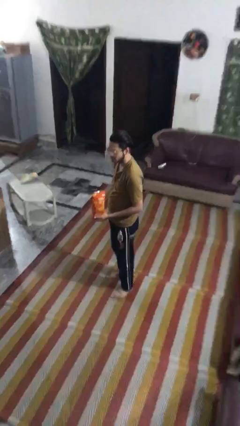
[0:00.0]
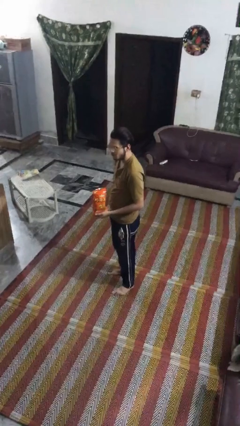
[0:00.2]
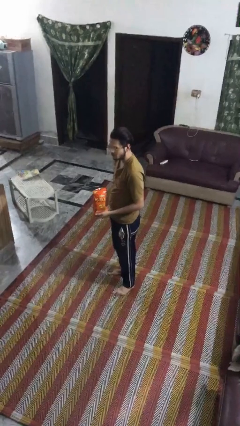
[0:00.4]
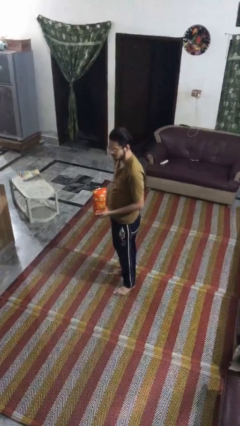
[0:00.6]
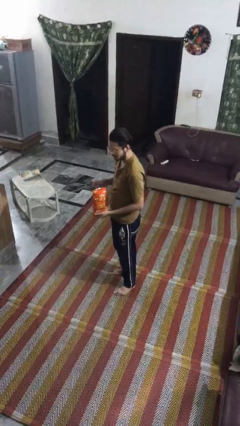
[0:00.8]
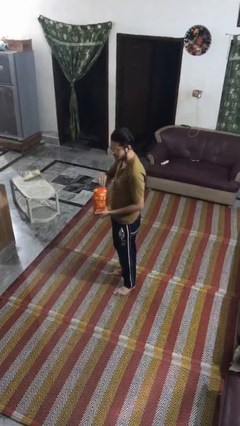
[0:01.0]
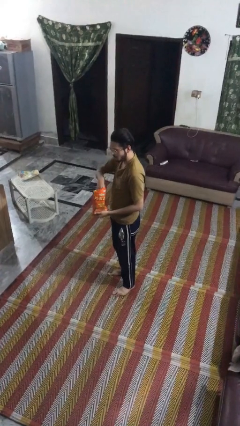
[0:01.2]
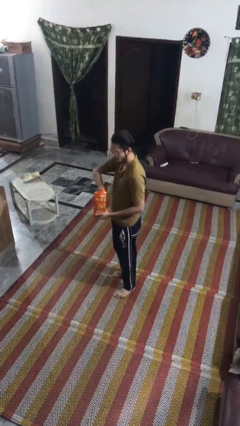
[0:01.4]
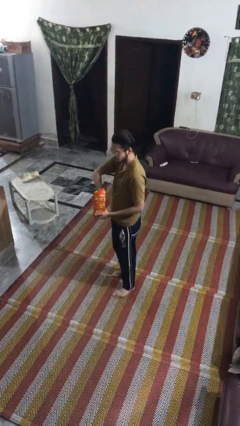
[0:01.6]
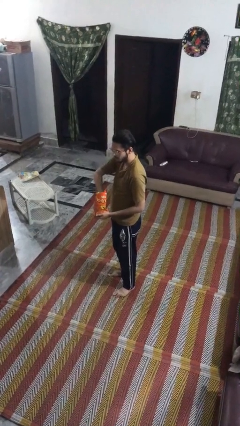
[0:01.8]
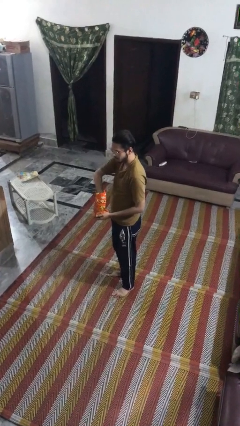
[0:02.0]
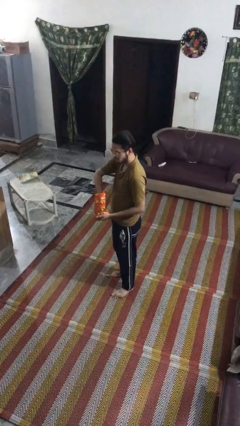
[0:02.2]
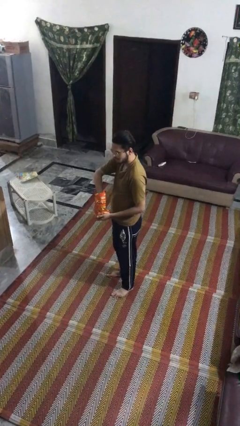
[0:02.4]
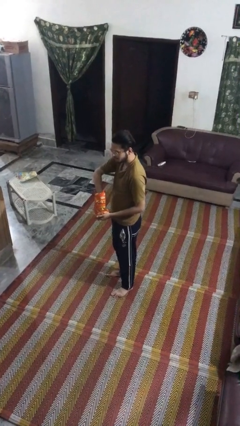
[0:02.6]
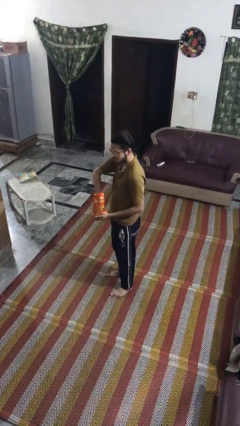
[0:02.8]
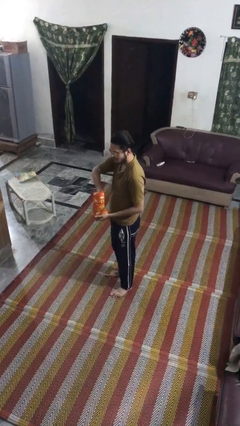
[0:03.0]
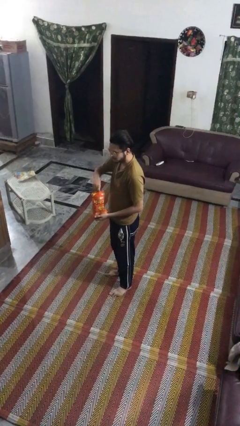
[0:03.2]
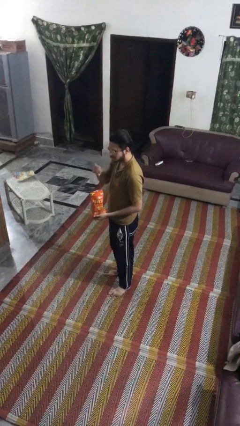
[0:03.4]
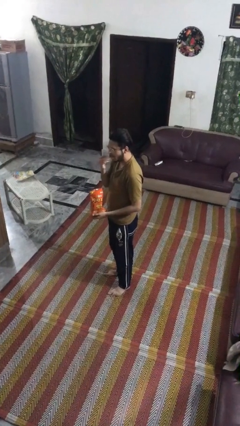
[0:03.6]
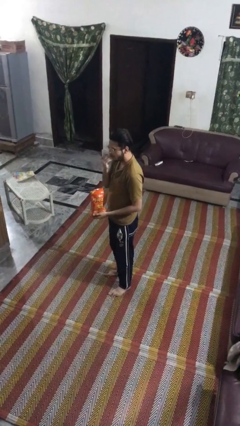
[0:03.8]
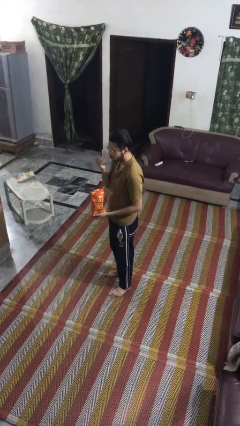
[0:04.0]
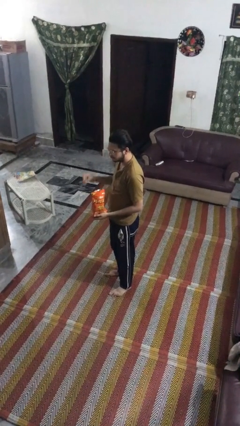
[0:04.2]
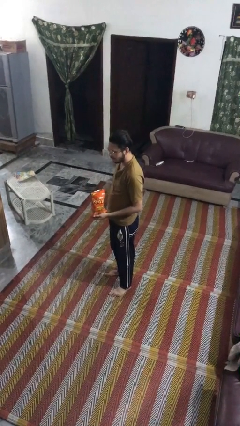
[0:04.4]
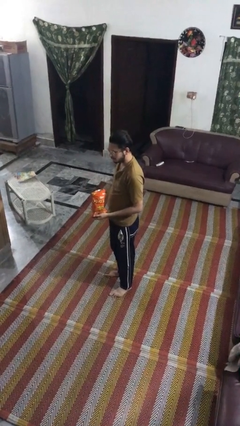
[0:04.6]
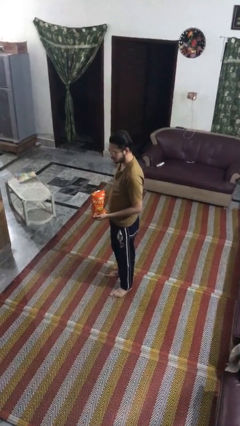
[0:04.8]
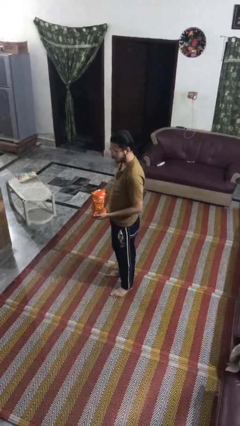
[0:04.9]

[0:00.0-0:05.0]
person eats snack from bag

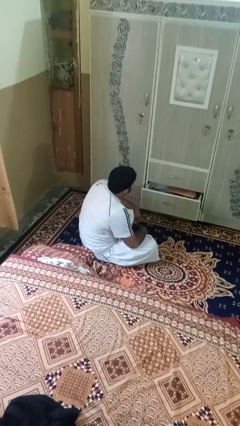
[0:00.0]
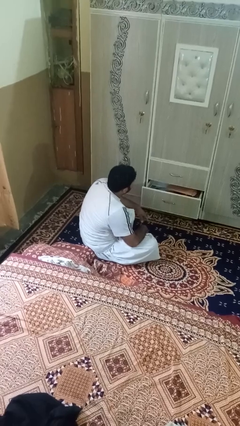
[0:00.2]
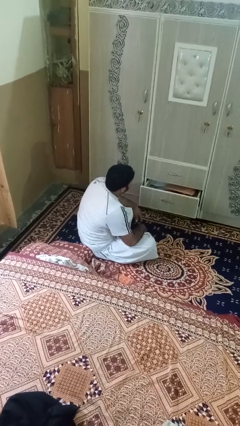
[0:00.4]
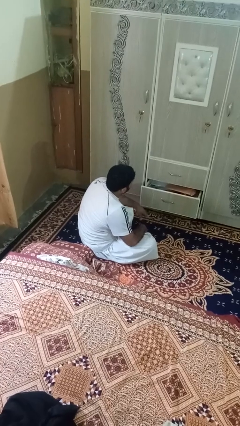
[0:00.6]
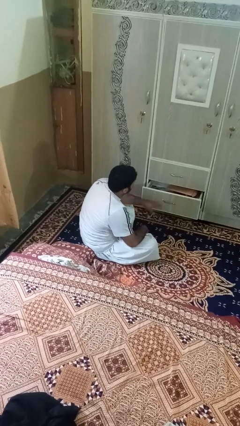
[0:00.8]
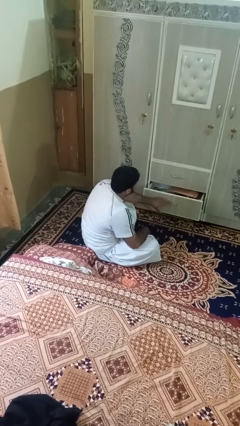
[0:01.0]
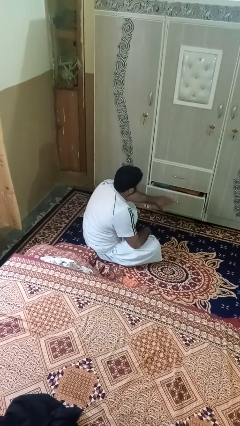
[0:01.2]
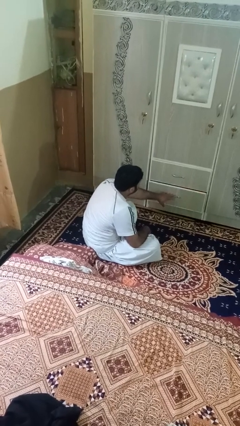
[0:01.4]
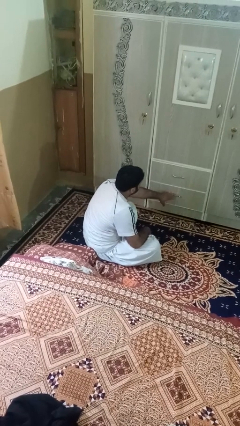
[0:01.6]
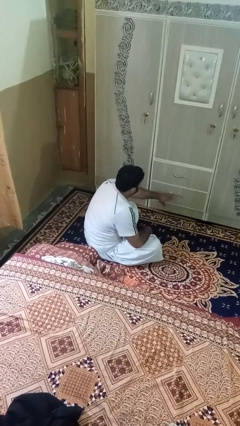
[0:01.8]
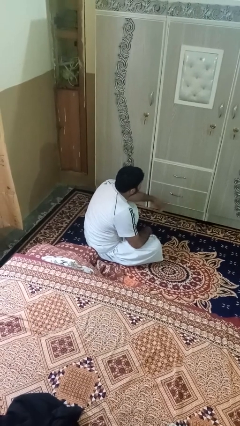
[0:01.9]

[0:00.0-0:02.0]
person closes dresser drawer

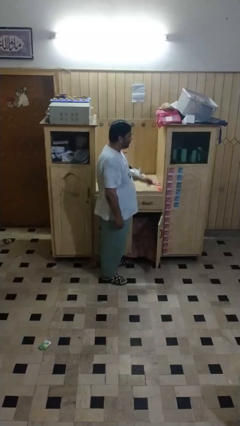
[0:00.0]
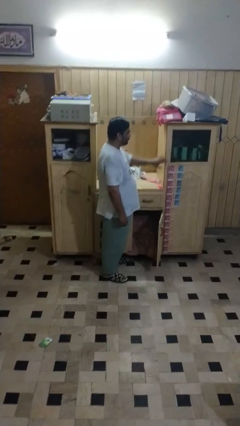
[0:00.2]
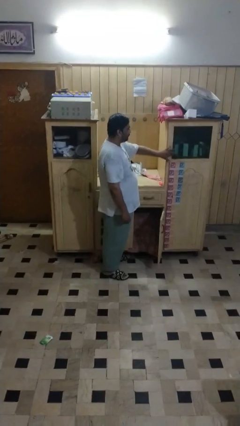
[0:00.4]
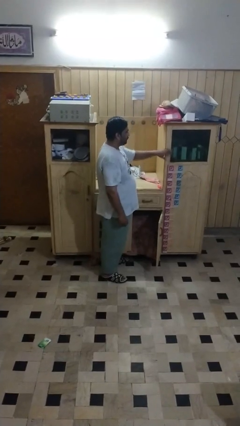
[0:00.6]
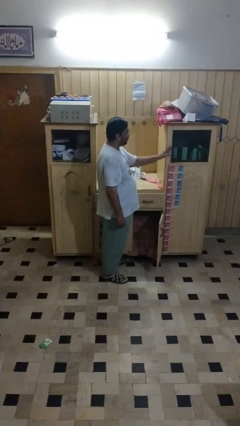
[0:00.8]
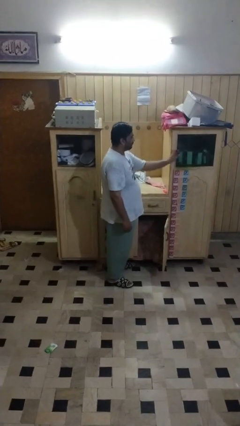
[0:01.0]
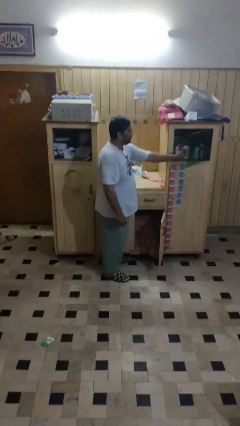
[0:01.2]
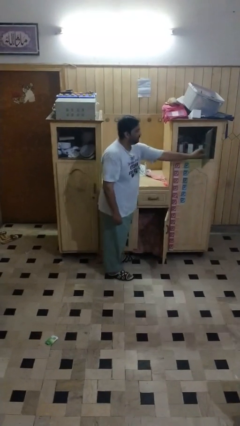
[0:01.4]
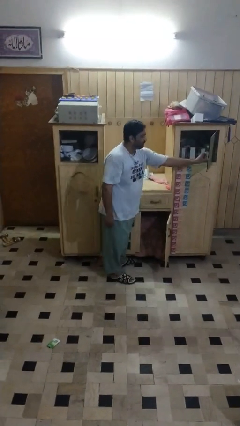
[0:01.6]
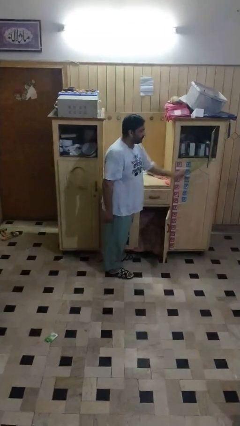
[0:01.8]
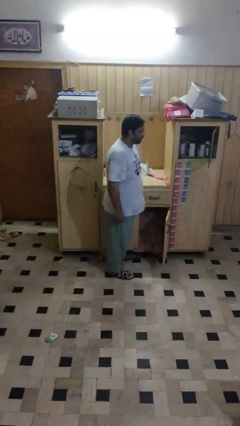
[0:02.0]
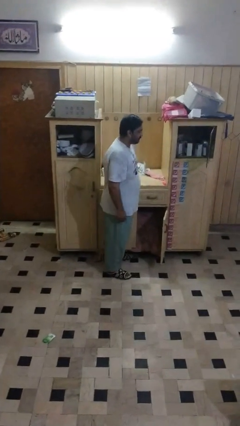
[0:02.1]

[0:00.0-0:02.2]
person closes cabinet

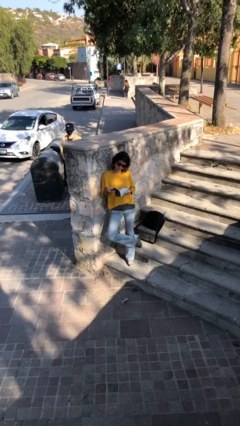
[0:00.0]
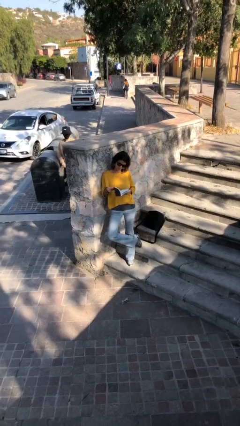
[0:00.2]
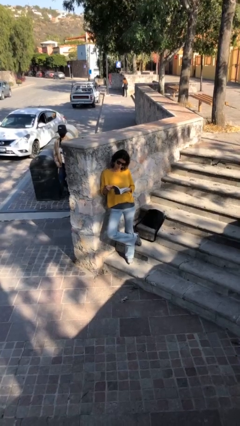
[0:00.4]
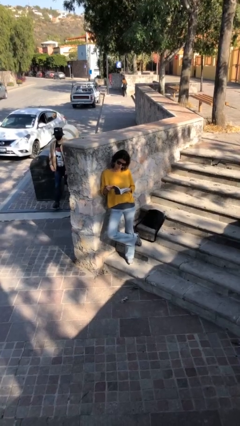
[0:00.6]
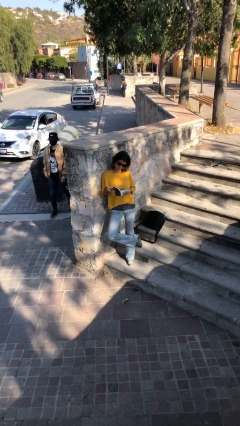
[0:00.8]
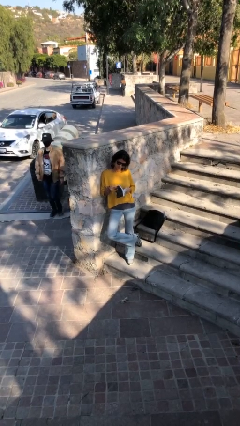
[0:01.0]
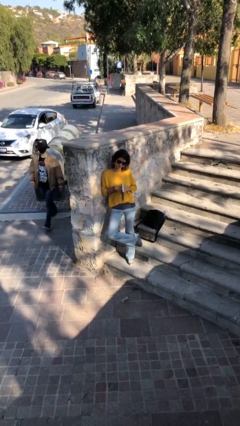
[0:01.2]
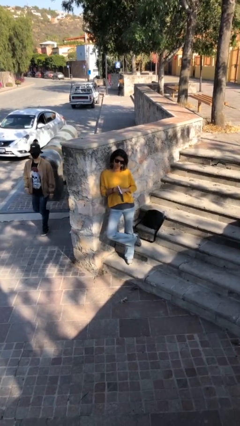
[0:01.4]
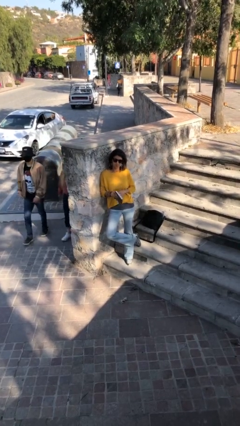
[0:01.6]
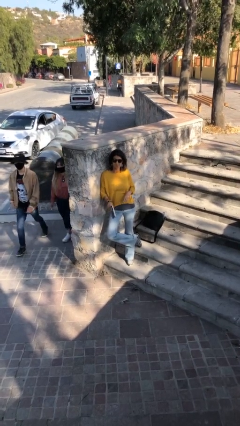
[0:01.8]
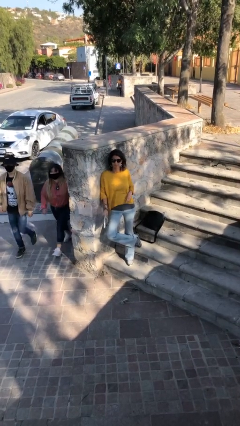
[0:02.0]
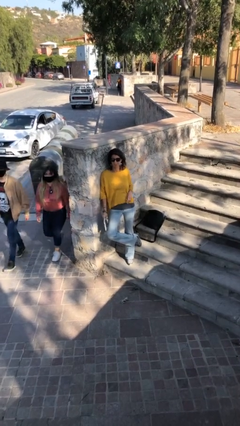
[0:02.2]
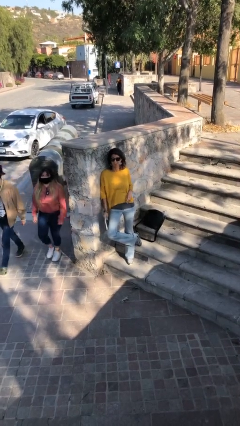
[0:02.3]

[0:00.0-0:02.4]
person reads document

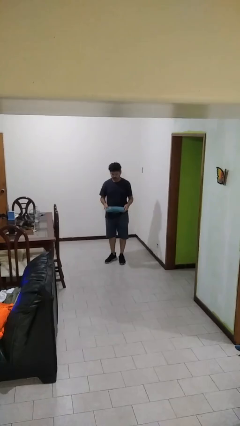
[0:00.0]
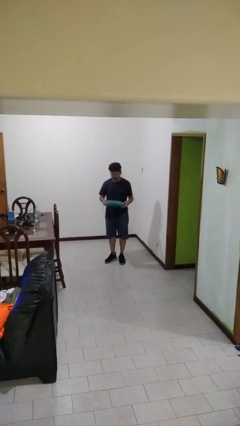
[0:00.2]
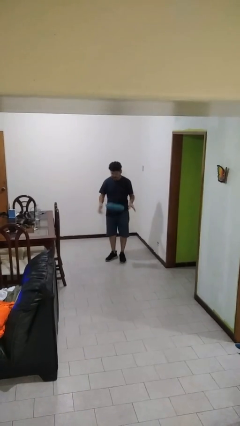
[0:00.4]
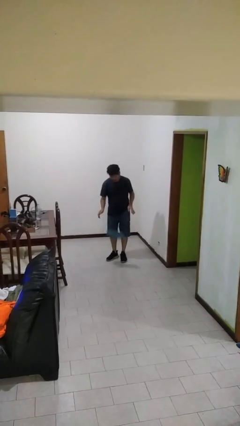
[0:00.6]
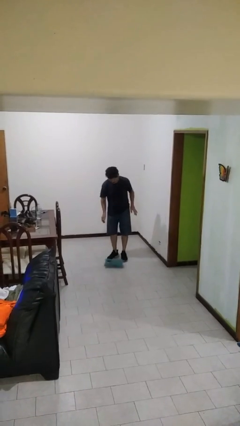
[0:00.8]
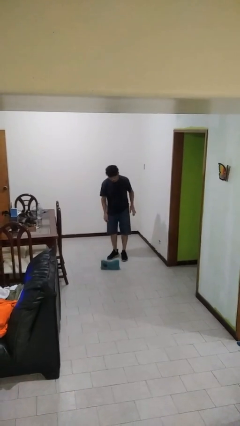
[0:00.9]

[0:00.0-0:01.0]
person drops object

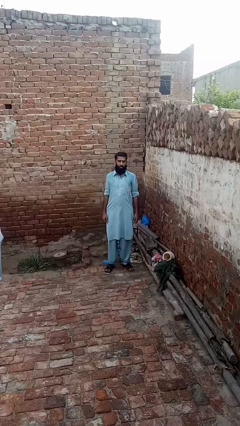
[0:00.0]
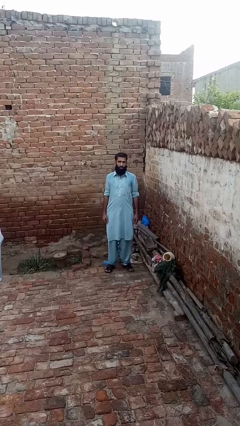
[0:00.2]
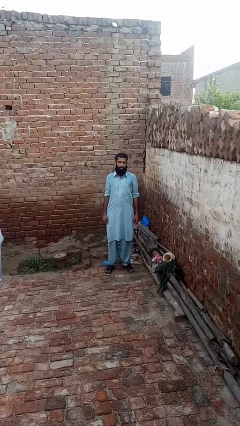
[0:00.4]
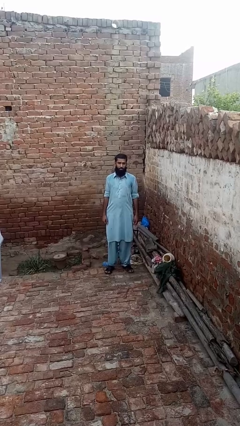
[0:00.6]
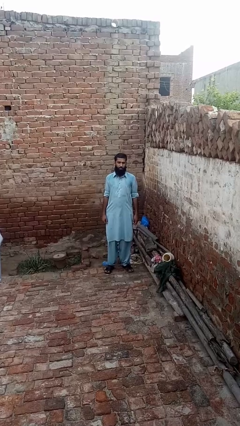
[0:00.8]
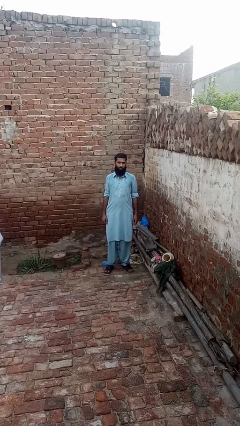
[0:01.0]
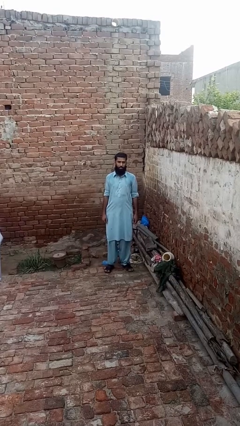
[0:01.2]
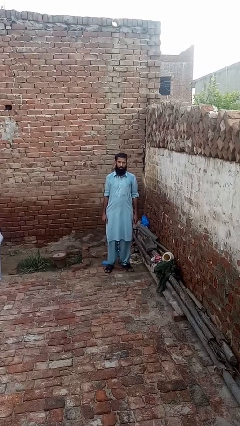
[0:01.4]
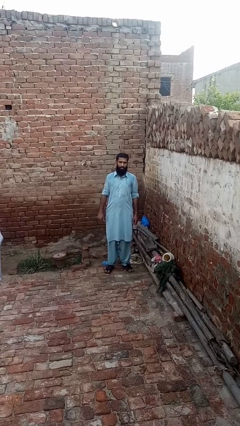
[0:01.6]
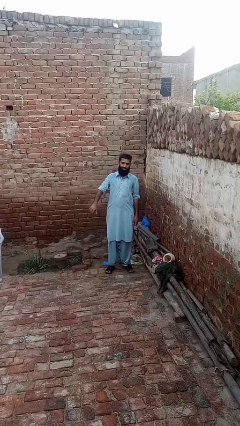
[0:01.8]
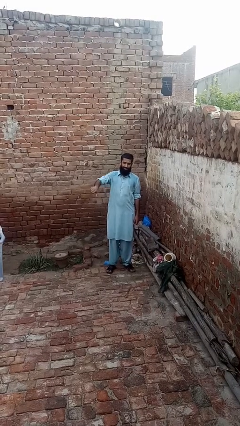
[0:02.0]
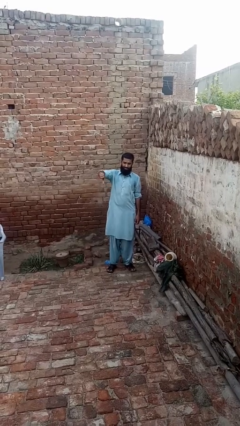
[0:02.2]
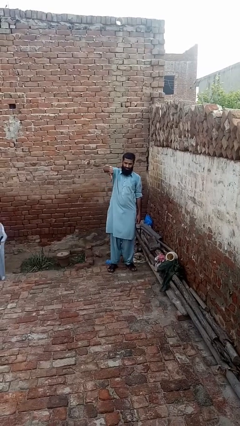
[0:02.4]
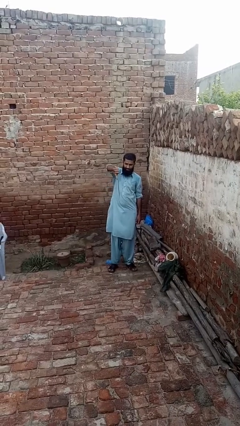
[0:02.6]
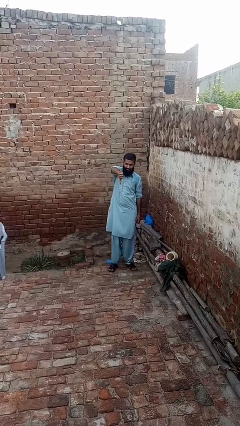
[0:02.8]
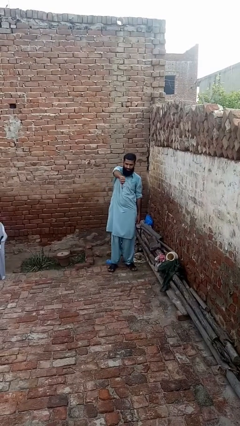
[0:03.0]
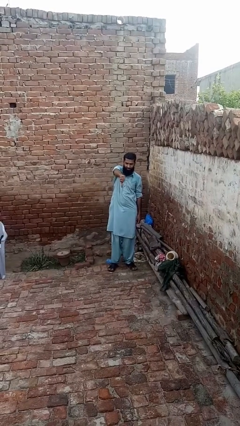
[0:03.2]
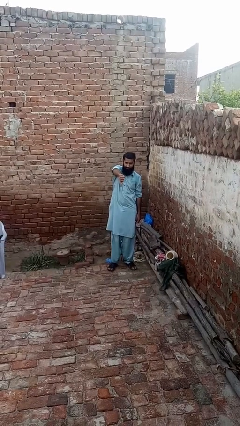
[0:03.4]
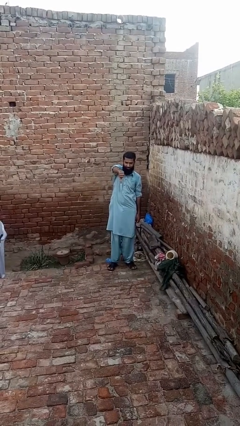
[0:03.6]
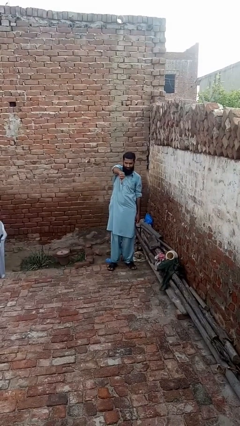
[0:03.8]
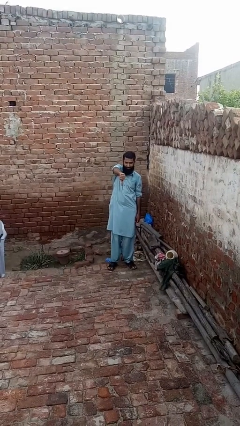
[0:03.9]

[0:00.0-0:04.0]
person gestures thumbs down

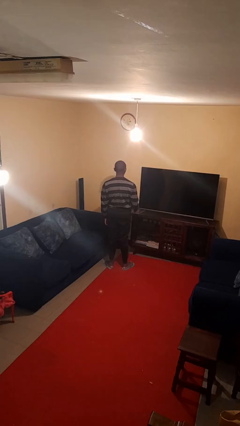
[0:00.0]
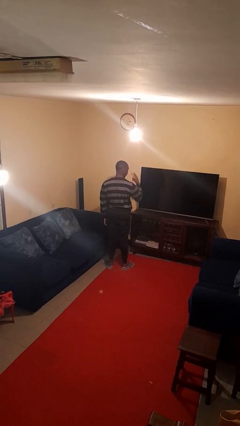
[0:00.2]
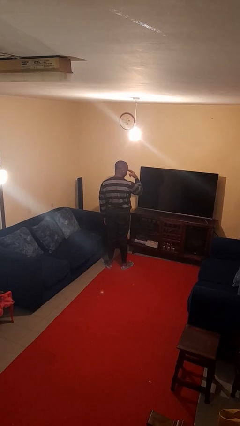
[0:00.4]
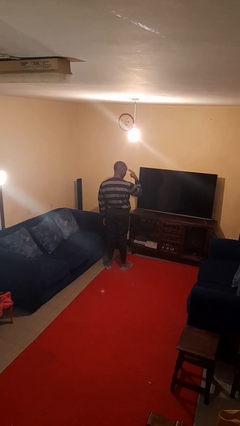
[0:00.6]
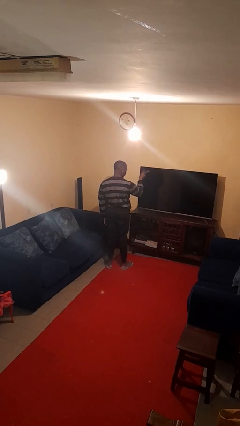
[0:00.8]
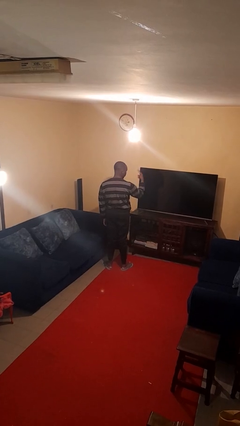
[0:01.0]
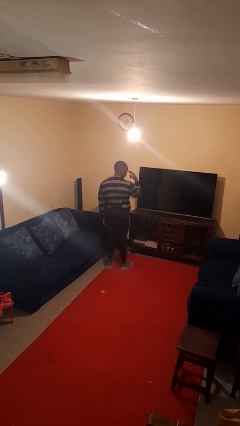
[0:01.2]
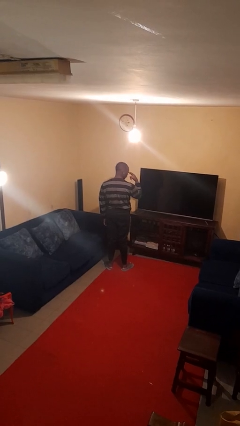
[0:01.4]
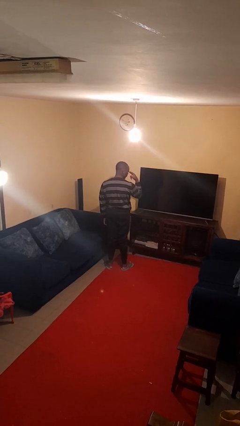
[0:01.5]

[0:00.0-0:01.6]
person gestures watch closely
